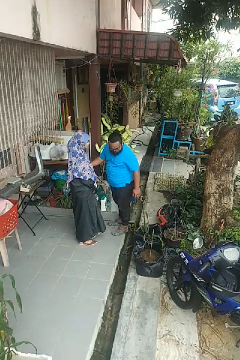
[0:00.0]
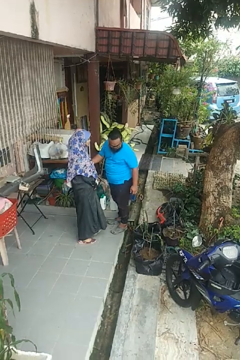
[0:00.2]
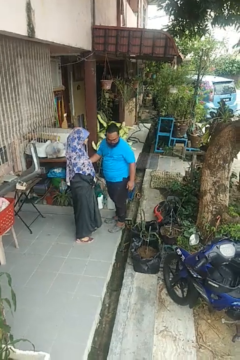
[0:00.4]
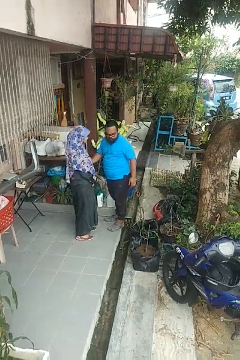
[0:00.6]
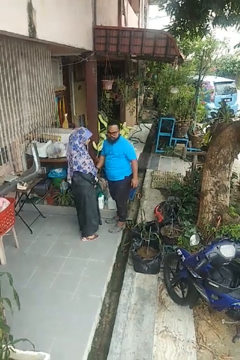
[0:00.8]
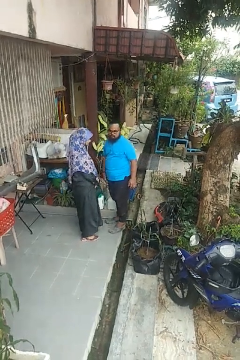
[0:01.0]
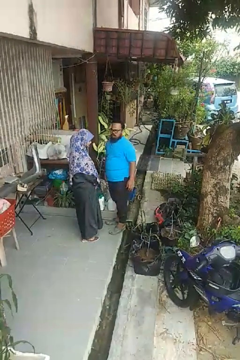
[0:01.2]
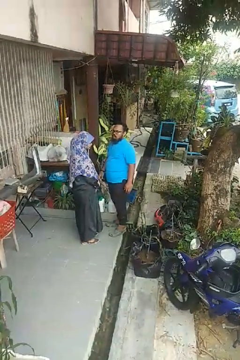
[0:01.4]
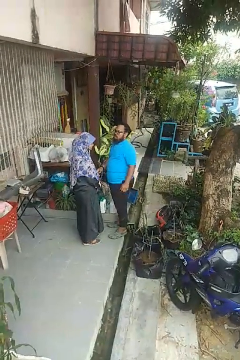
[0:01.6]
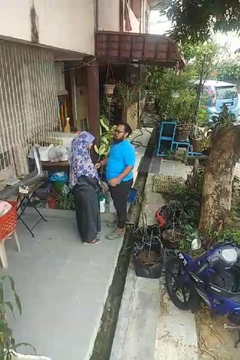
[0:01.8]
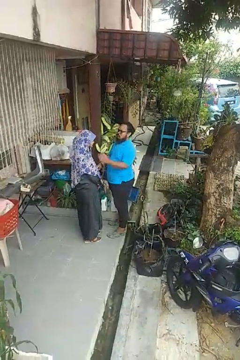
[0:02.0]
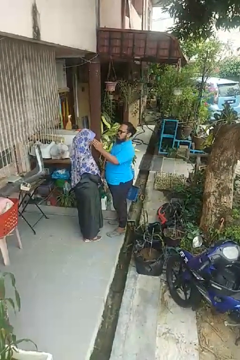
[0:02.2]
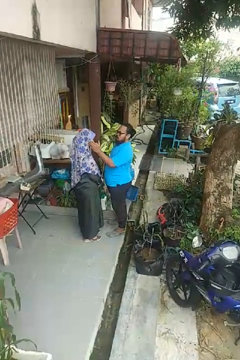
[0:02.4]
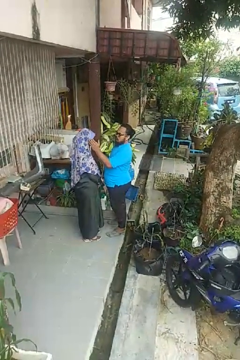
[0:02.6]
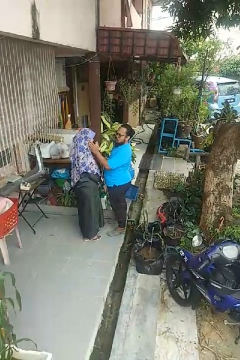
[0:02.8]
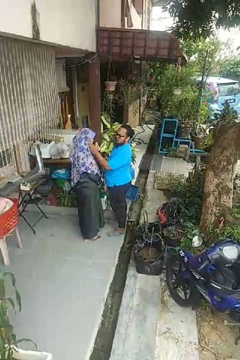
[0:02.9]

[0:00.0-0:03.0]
person touches face of person

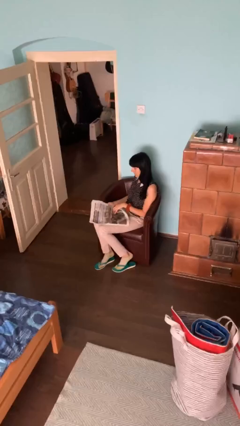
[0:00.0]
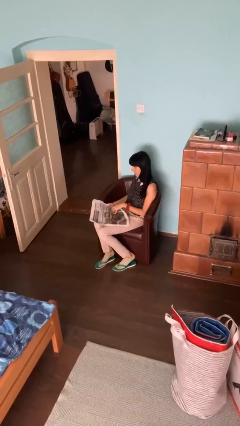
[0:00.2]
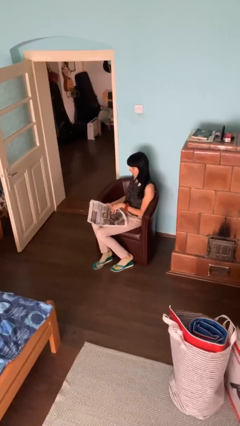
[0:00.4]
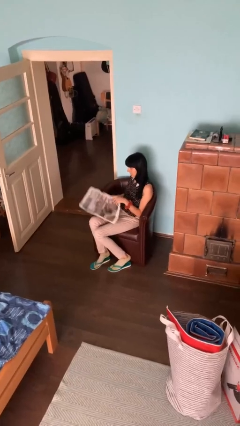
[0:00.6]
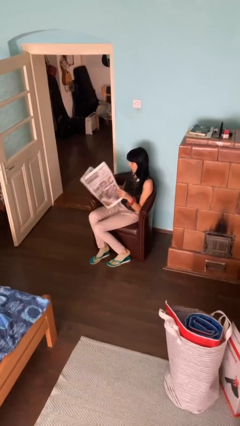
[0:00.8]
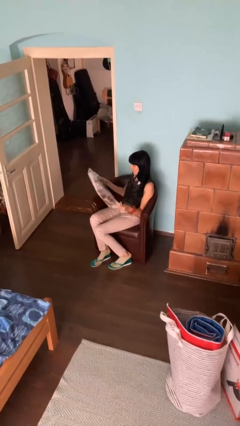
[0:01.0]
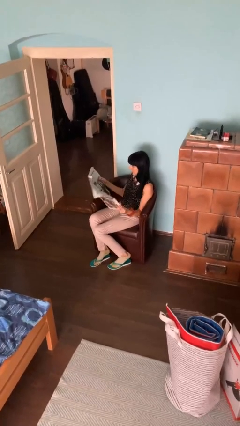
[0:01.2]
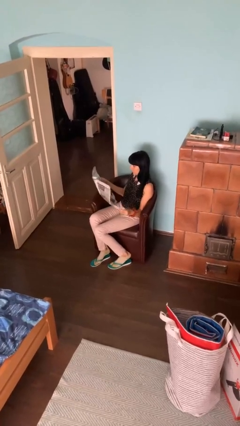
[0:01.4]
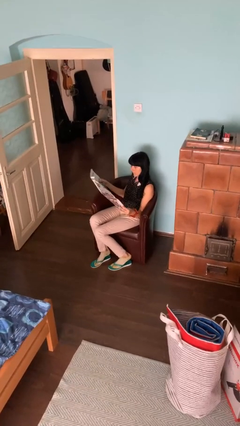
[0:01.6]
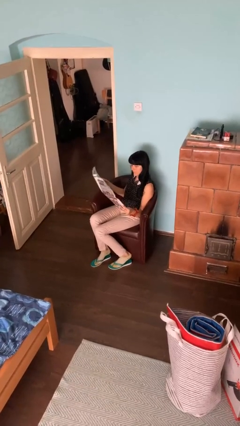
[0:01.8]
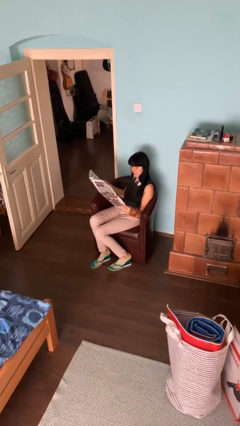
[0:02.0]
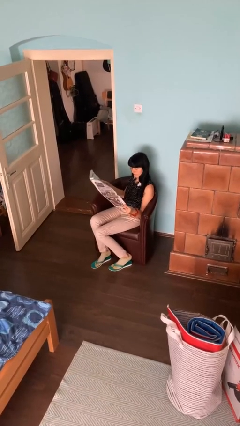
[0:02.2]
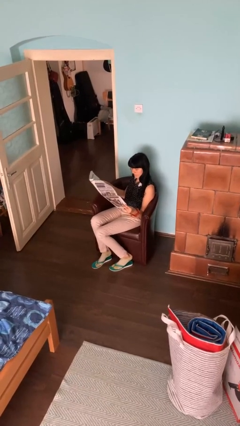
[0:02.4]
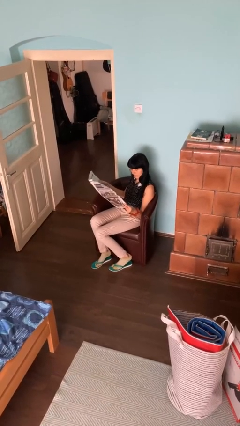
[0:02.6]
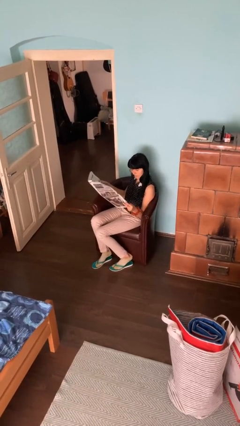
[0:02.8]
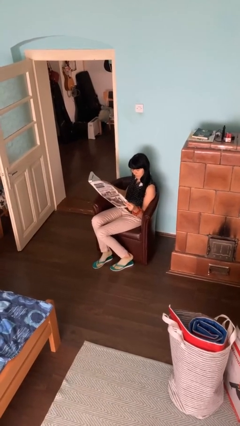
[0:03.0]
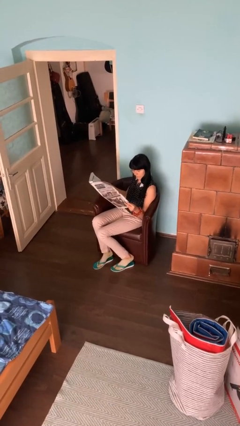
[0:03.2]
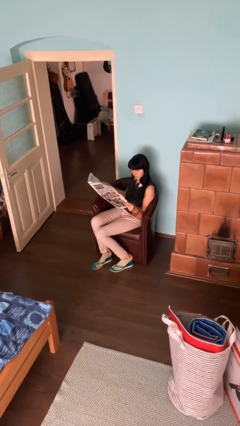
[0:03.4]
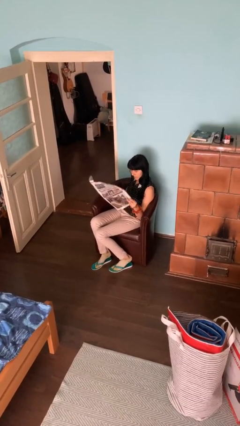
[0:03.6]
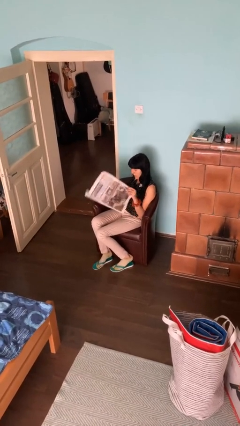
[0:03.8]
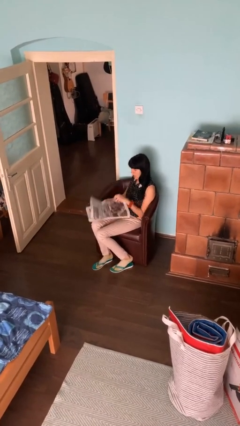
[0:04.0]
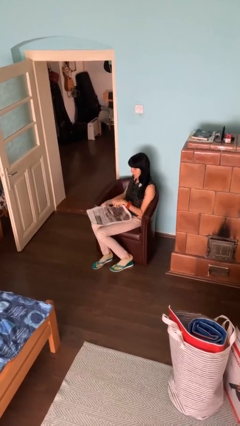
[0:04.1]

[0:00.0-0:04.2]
person reads newspaper

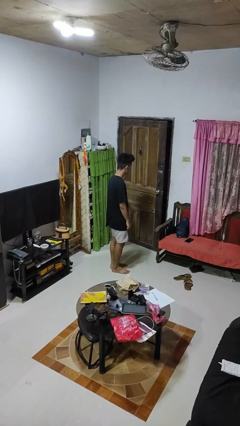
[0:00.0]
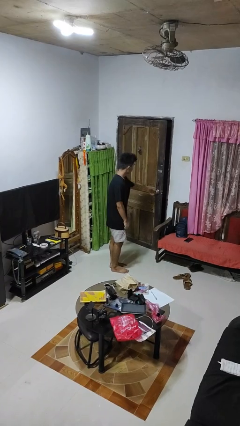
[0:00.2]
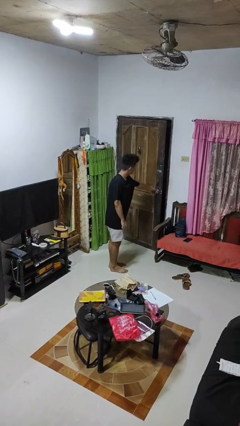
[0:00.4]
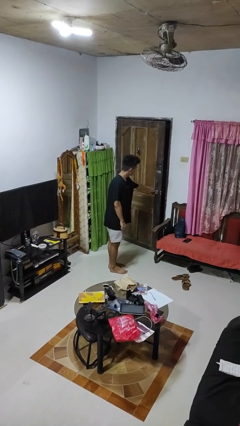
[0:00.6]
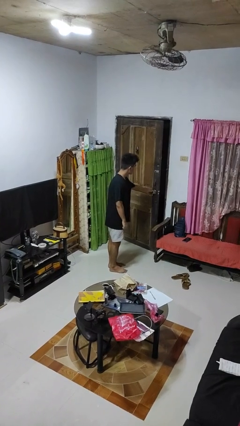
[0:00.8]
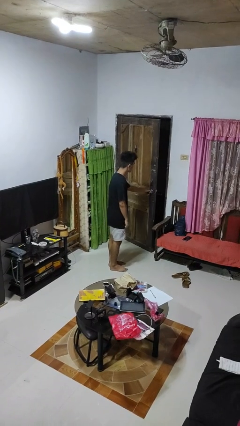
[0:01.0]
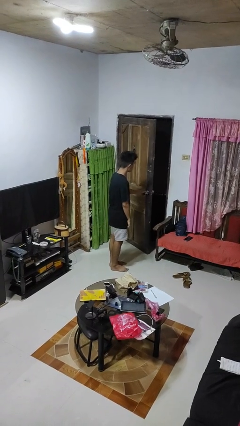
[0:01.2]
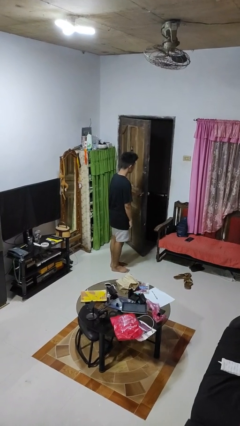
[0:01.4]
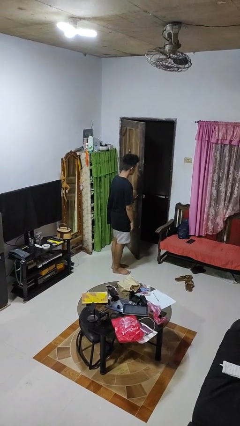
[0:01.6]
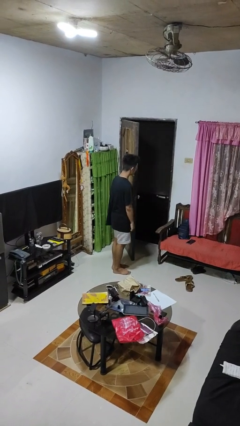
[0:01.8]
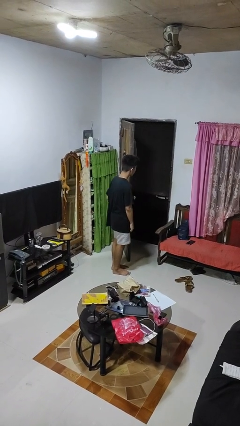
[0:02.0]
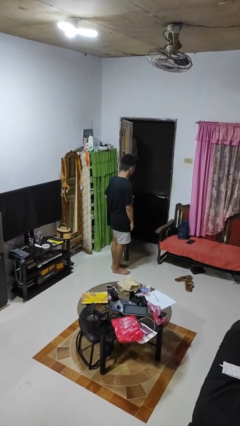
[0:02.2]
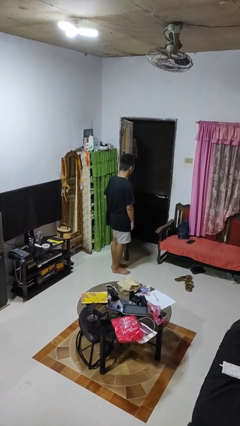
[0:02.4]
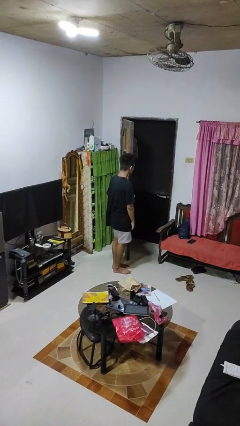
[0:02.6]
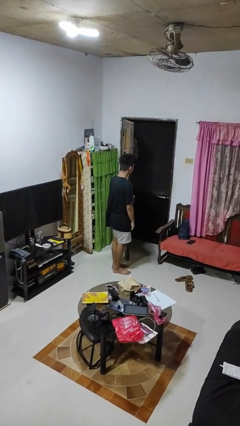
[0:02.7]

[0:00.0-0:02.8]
person opens facility door

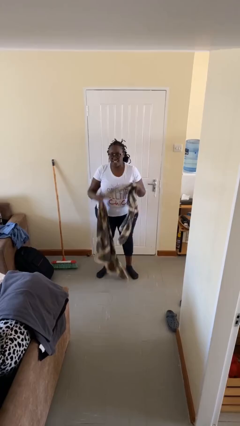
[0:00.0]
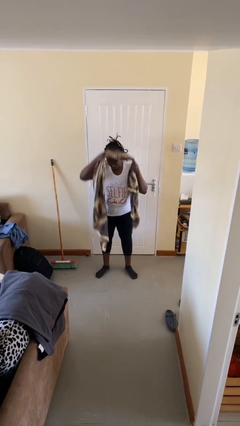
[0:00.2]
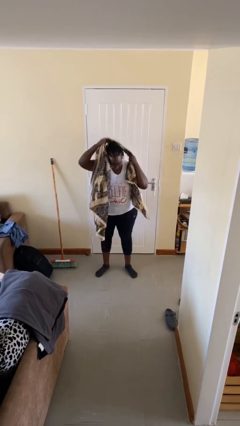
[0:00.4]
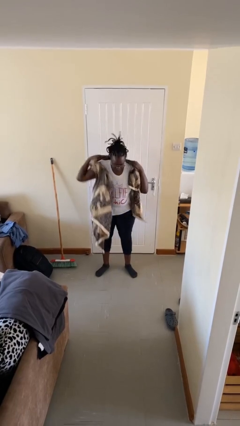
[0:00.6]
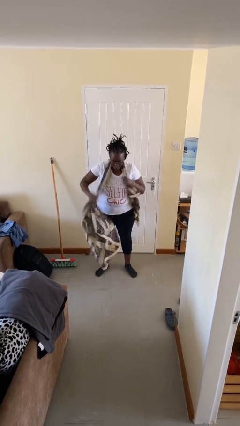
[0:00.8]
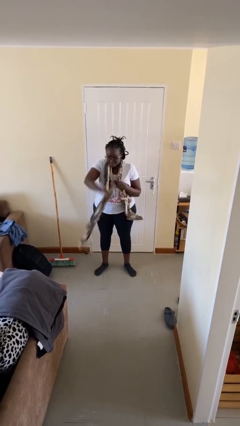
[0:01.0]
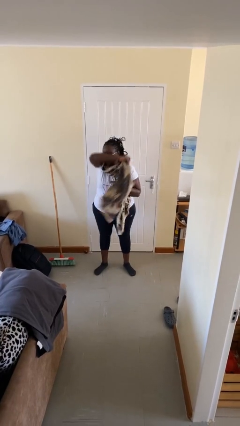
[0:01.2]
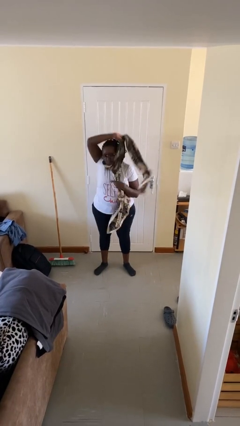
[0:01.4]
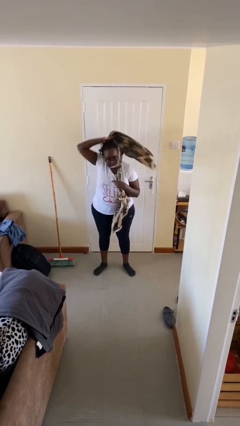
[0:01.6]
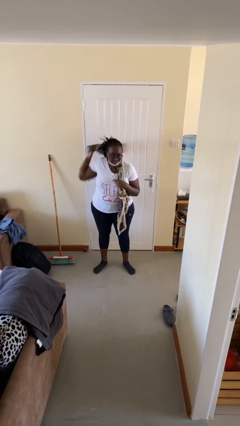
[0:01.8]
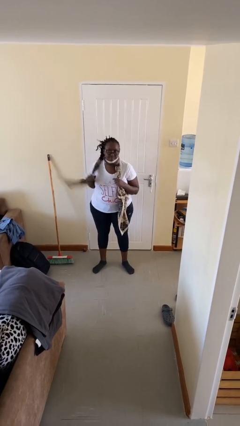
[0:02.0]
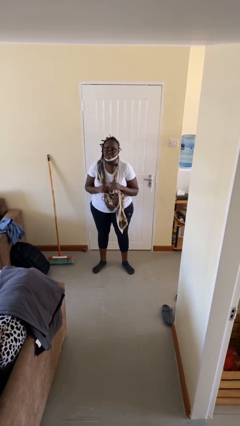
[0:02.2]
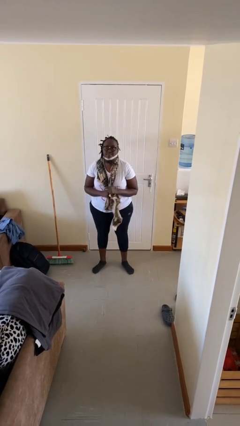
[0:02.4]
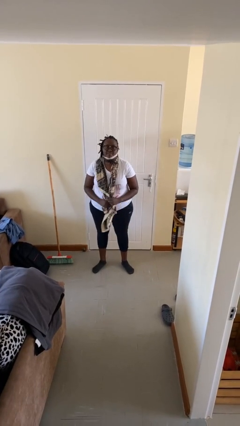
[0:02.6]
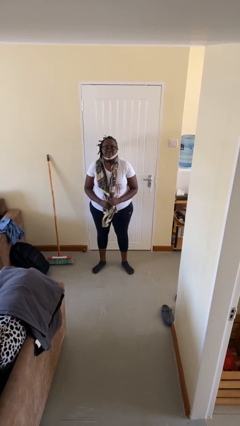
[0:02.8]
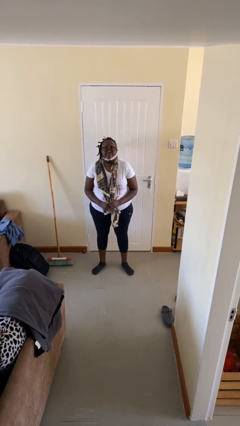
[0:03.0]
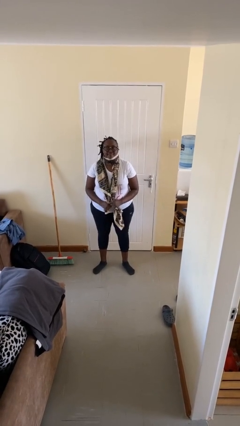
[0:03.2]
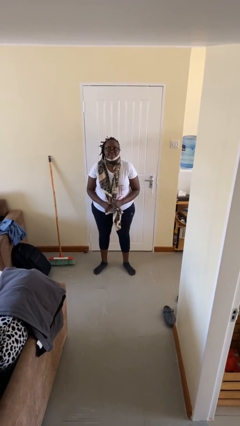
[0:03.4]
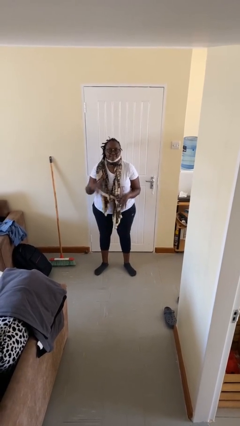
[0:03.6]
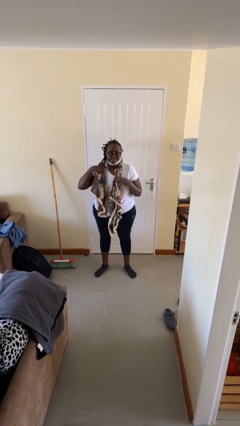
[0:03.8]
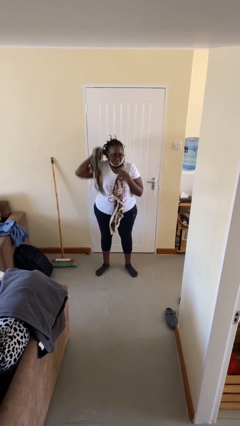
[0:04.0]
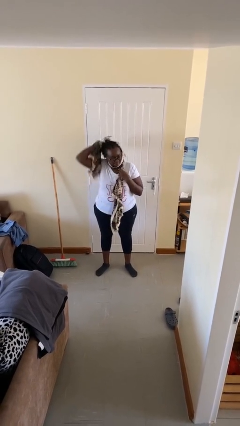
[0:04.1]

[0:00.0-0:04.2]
person puts on scarf

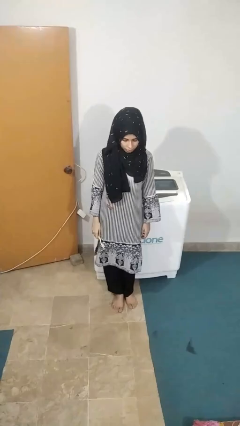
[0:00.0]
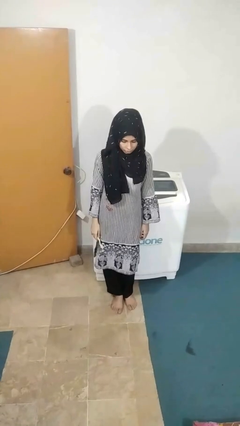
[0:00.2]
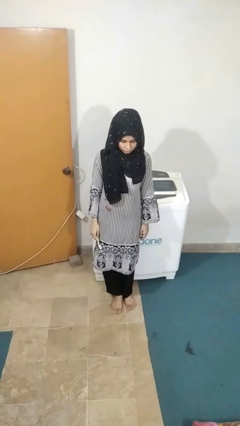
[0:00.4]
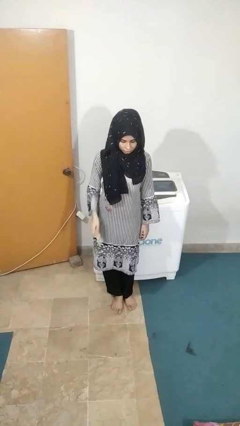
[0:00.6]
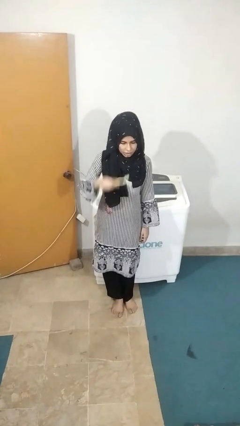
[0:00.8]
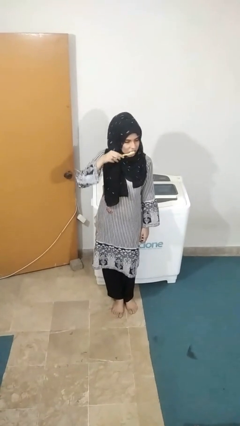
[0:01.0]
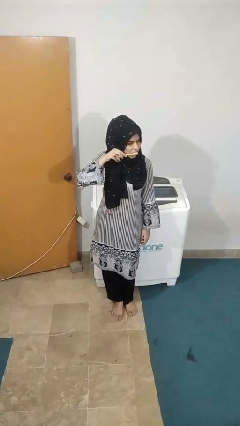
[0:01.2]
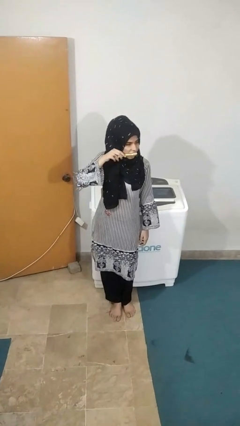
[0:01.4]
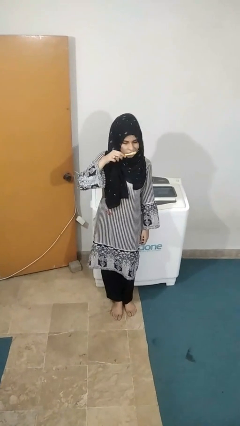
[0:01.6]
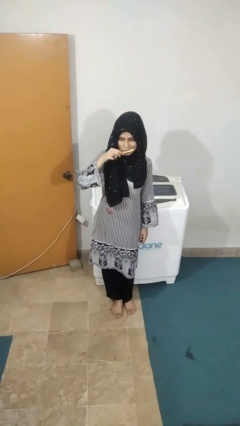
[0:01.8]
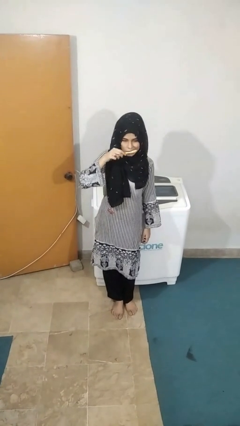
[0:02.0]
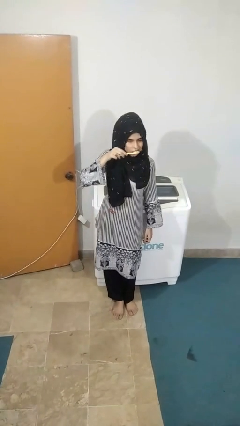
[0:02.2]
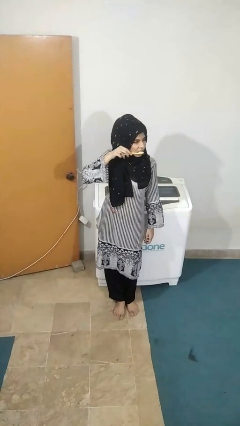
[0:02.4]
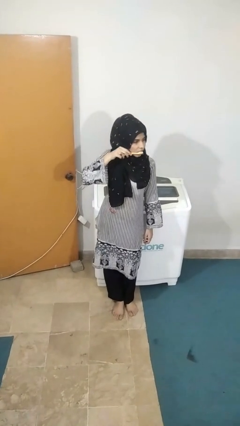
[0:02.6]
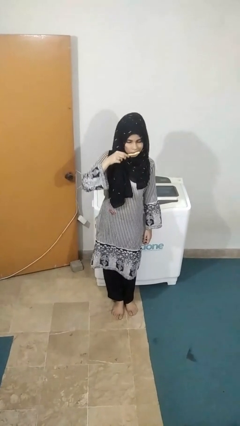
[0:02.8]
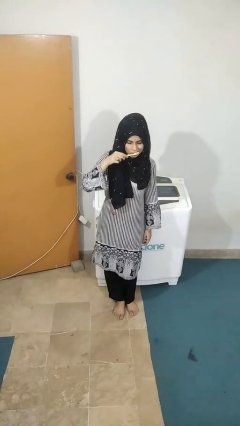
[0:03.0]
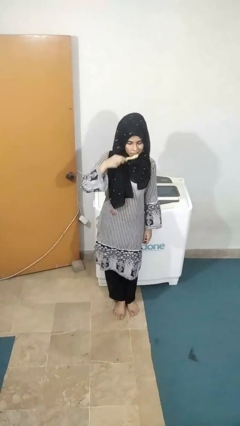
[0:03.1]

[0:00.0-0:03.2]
person brushes teeth

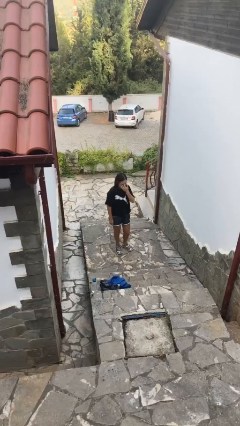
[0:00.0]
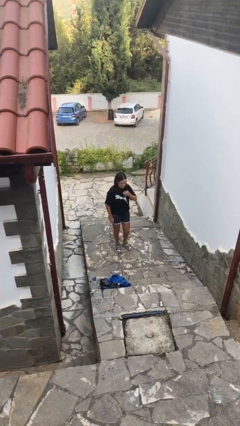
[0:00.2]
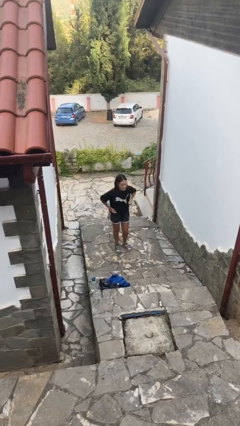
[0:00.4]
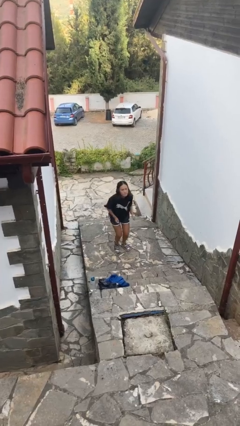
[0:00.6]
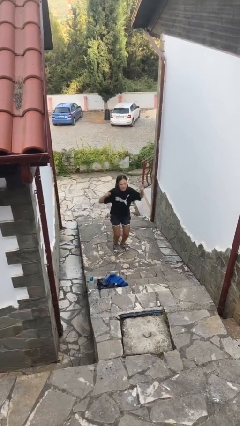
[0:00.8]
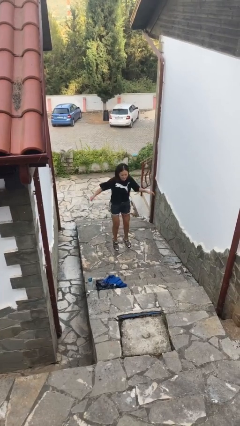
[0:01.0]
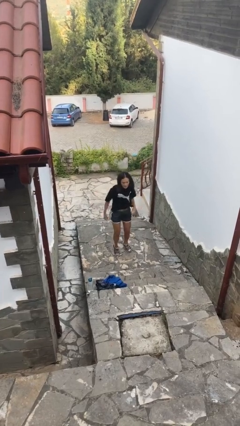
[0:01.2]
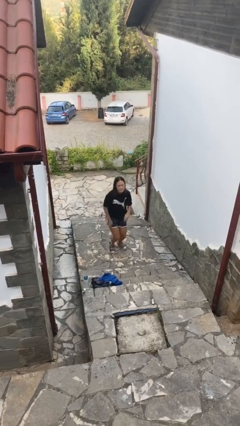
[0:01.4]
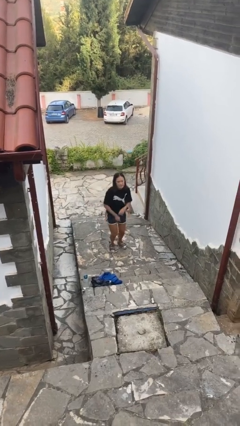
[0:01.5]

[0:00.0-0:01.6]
person jumps
